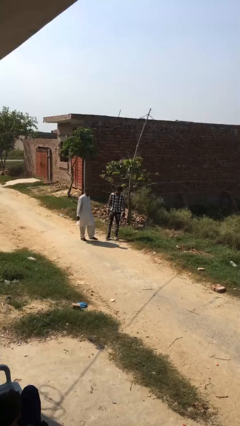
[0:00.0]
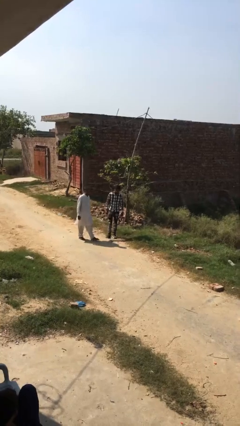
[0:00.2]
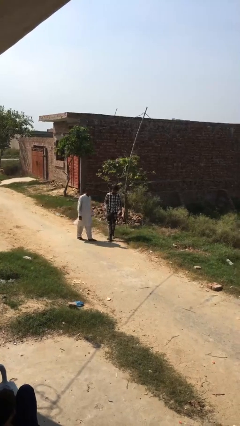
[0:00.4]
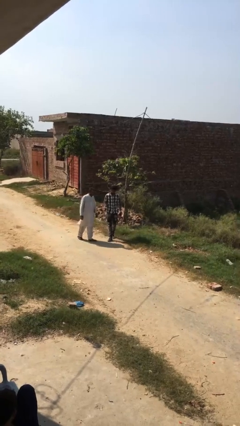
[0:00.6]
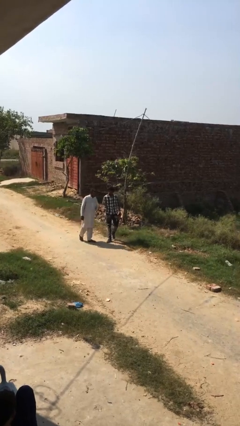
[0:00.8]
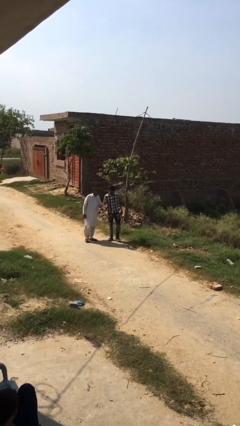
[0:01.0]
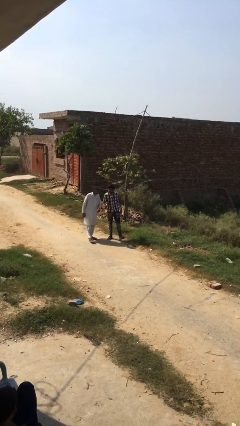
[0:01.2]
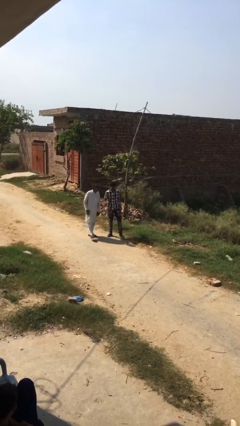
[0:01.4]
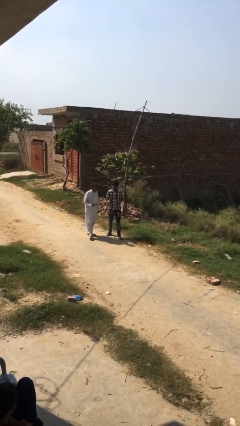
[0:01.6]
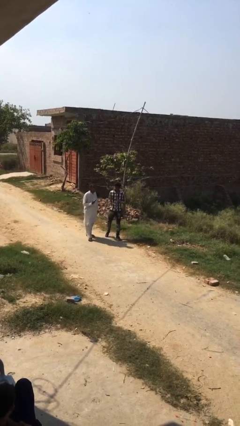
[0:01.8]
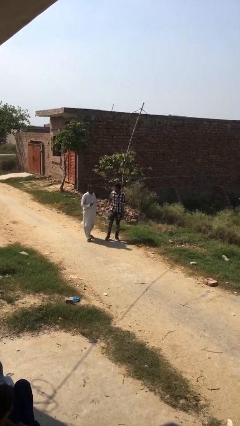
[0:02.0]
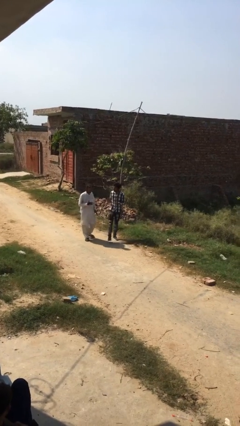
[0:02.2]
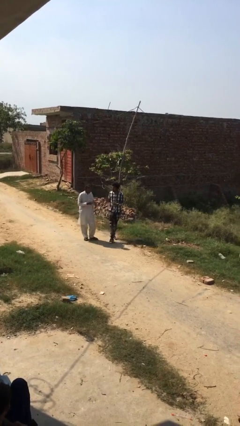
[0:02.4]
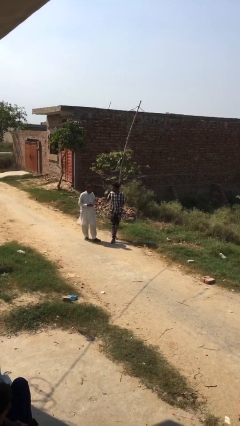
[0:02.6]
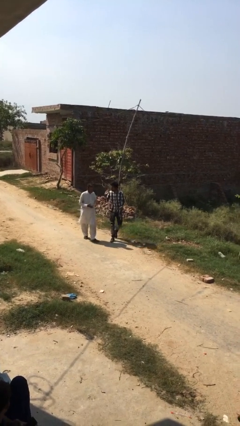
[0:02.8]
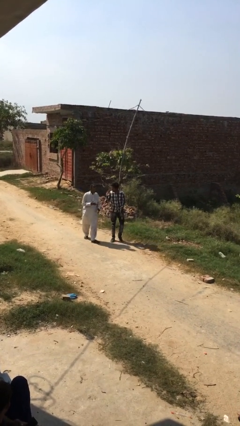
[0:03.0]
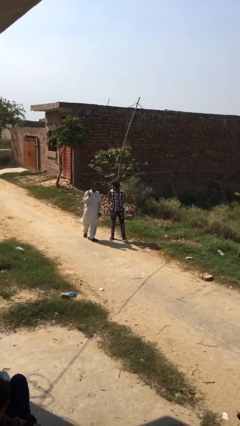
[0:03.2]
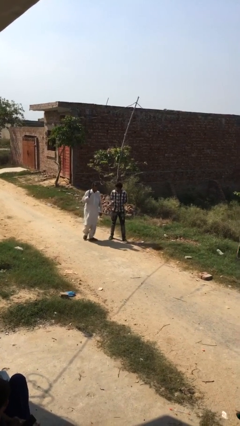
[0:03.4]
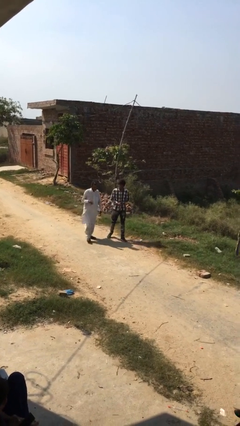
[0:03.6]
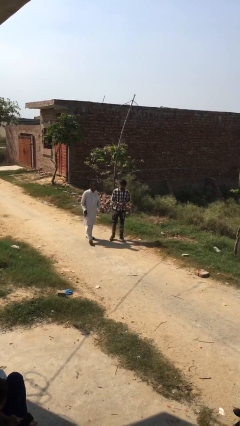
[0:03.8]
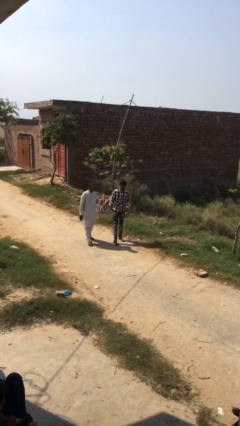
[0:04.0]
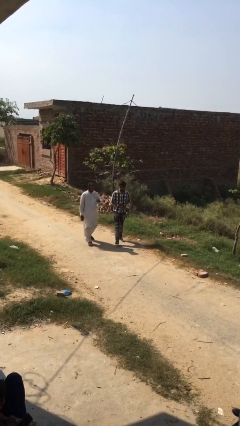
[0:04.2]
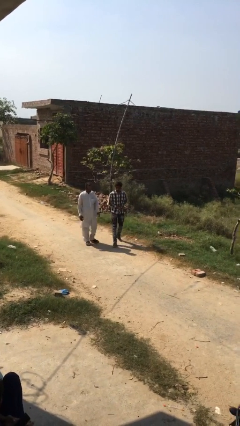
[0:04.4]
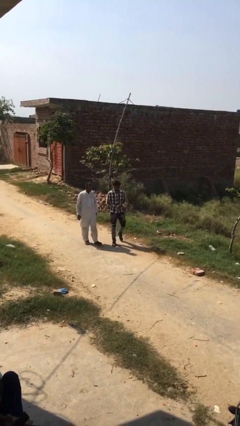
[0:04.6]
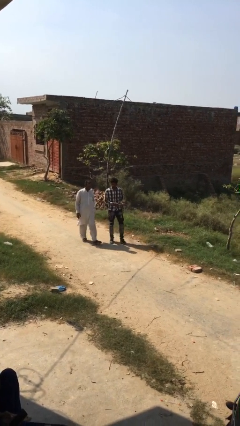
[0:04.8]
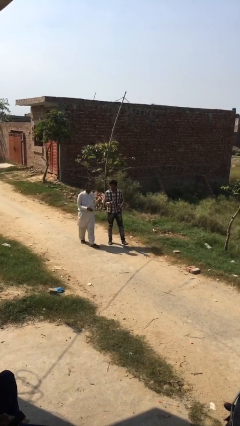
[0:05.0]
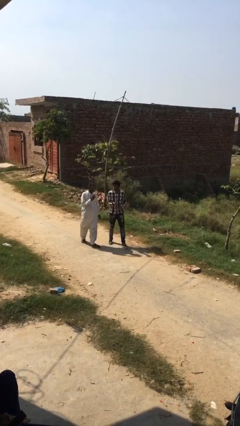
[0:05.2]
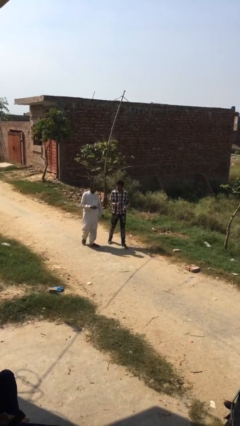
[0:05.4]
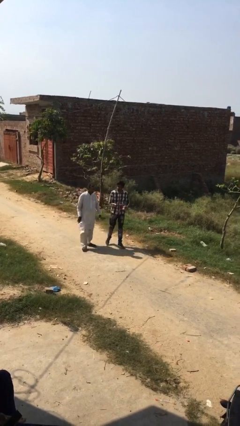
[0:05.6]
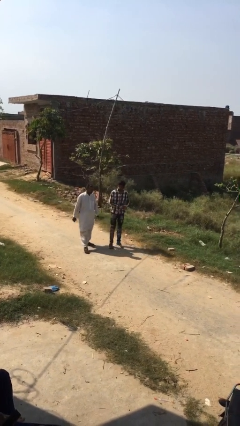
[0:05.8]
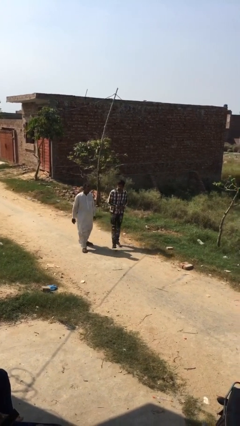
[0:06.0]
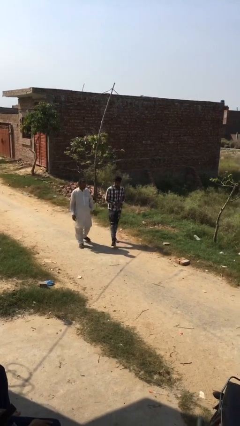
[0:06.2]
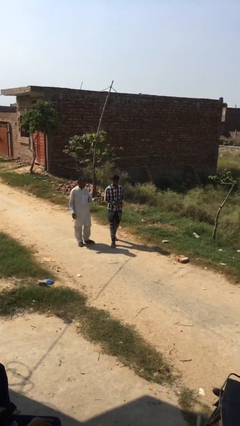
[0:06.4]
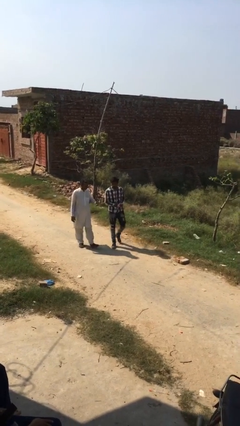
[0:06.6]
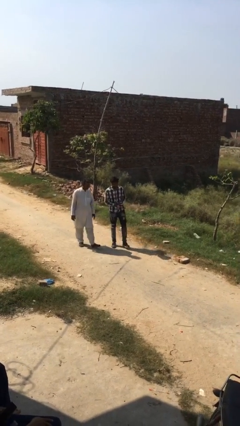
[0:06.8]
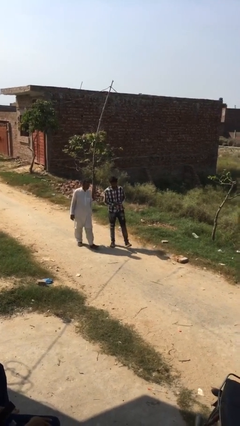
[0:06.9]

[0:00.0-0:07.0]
person talks to person

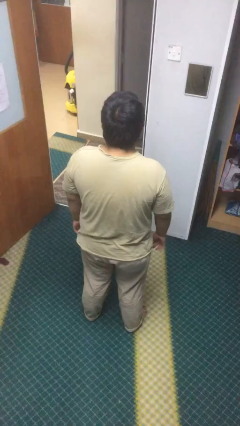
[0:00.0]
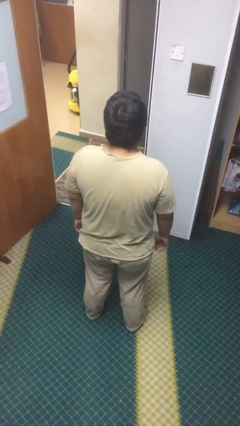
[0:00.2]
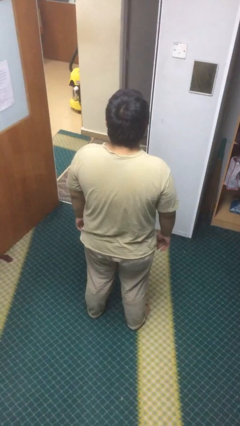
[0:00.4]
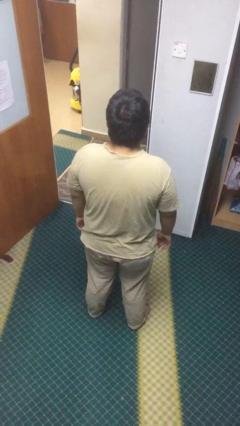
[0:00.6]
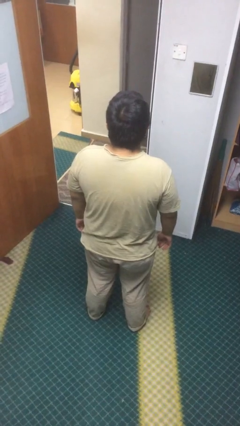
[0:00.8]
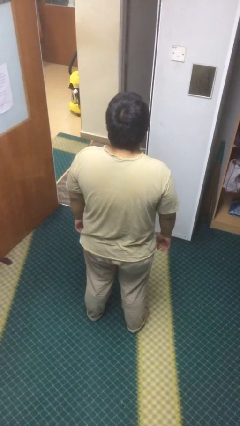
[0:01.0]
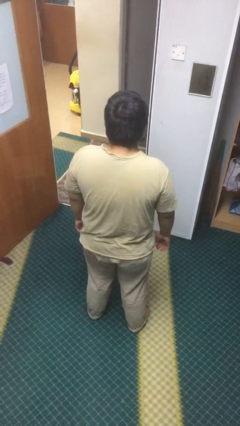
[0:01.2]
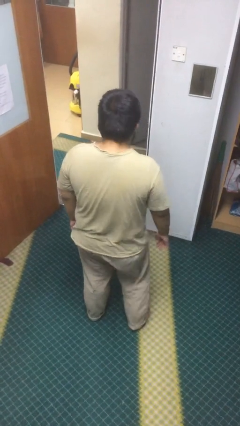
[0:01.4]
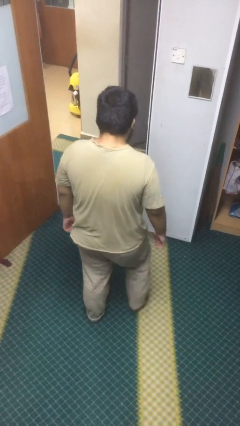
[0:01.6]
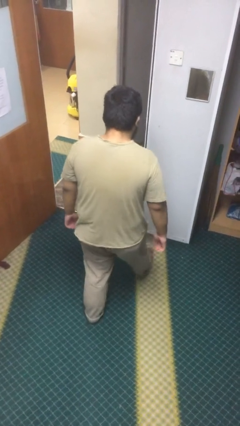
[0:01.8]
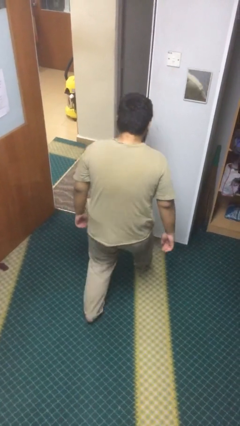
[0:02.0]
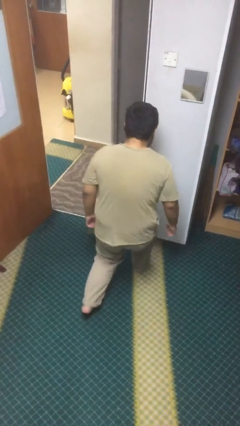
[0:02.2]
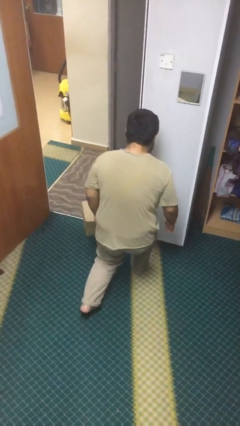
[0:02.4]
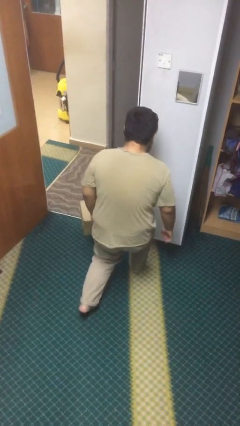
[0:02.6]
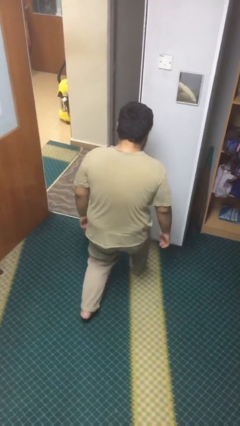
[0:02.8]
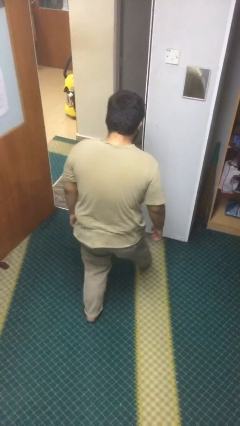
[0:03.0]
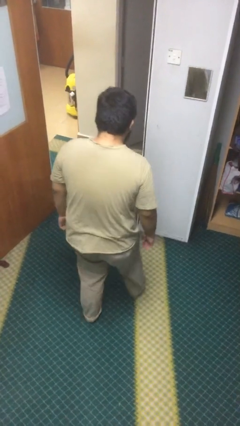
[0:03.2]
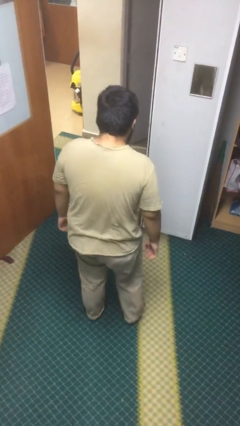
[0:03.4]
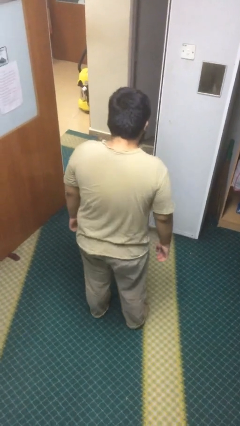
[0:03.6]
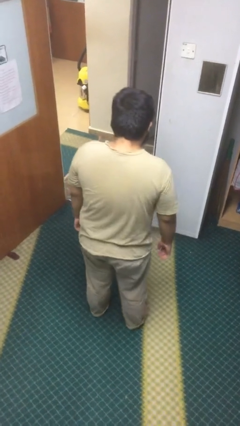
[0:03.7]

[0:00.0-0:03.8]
person exercises with lunges

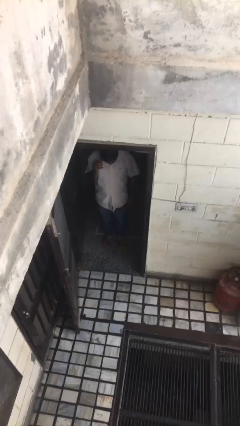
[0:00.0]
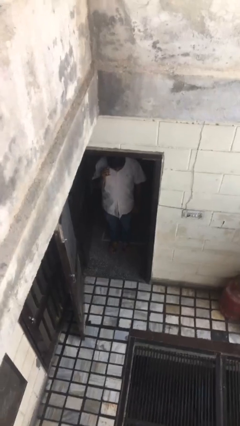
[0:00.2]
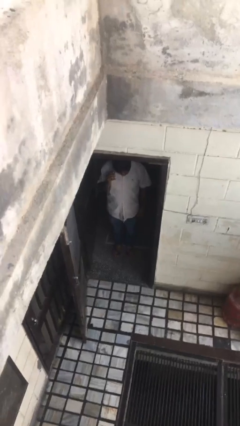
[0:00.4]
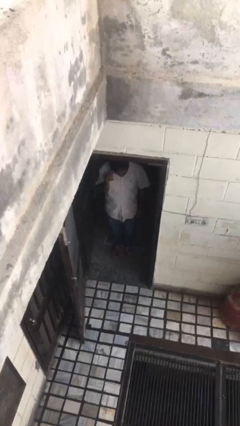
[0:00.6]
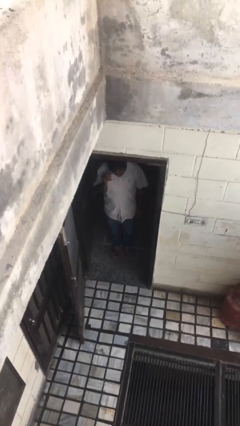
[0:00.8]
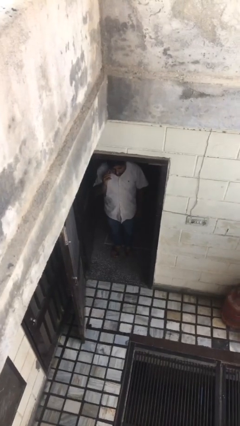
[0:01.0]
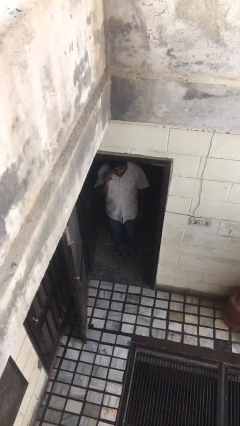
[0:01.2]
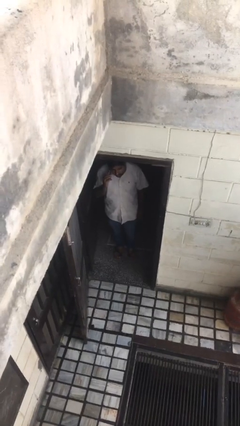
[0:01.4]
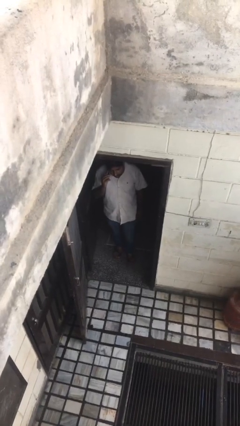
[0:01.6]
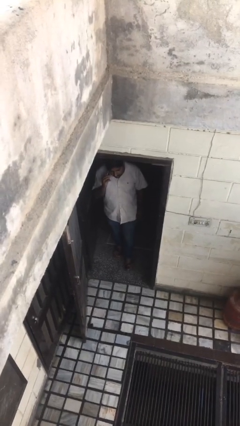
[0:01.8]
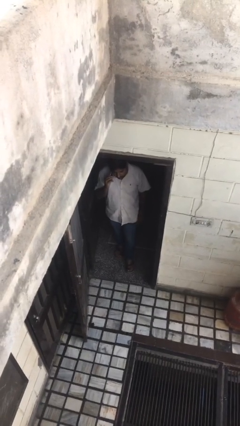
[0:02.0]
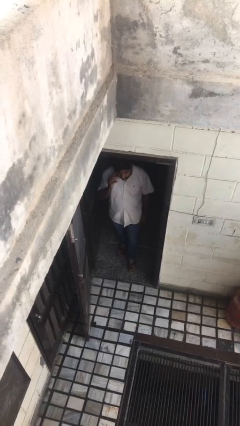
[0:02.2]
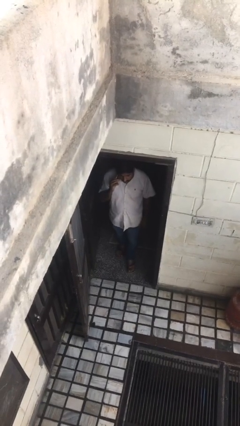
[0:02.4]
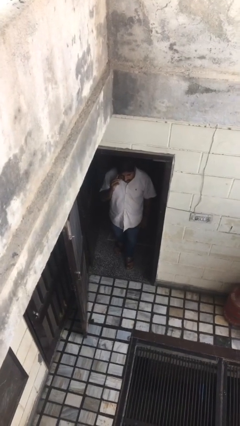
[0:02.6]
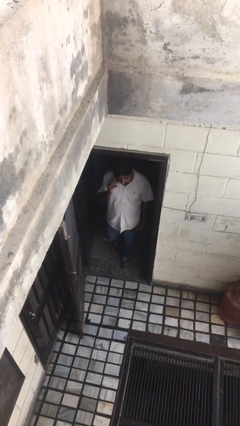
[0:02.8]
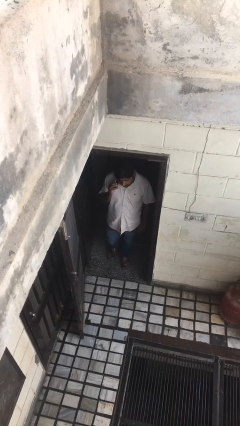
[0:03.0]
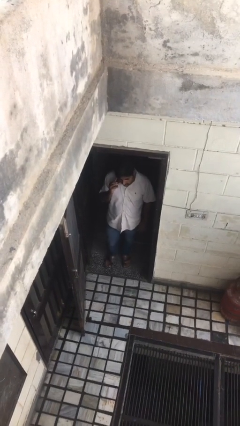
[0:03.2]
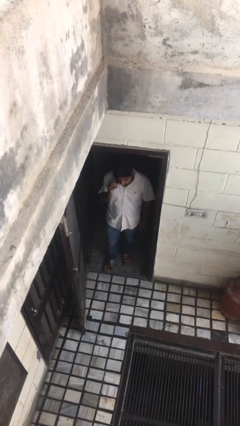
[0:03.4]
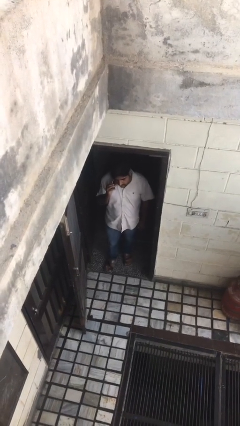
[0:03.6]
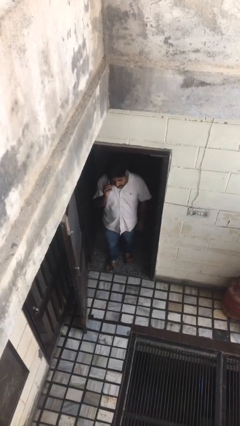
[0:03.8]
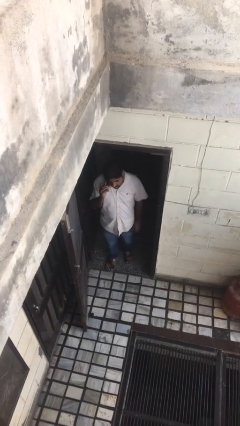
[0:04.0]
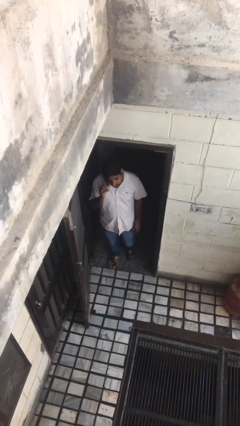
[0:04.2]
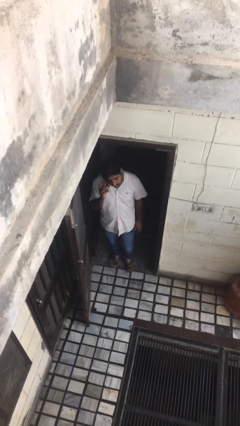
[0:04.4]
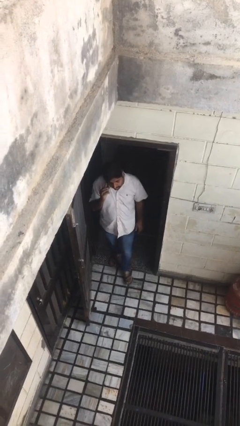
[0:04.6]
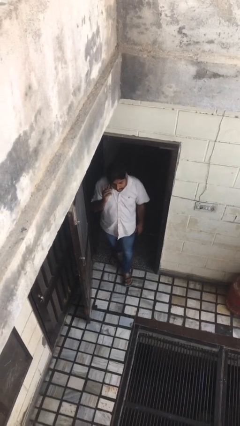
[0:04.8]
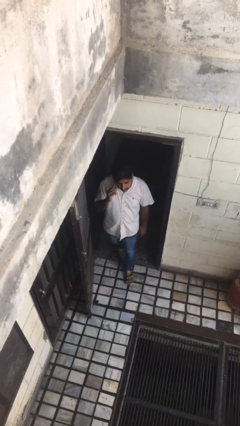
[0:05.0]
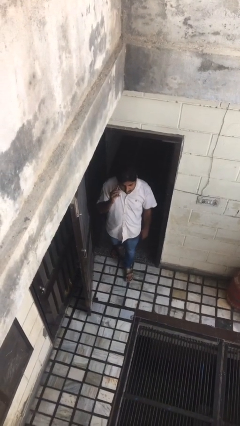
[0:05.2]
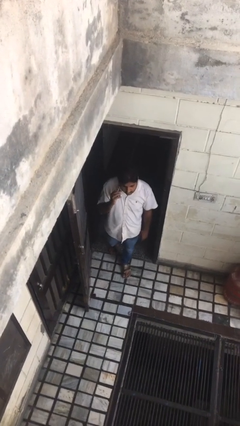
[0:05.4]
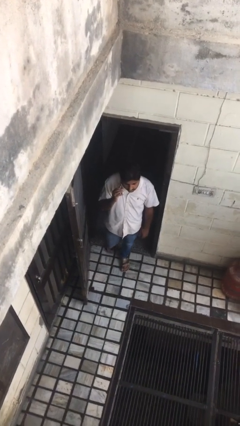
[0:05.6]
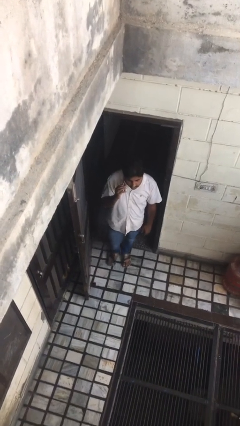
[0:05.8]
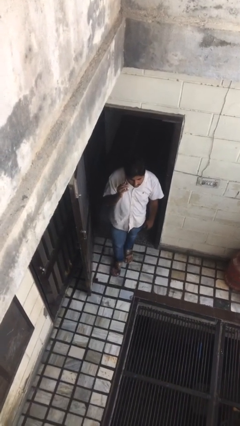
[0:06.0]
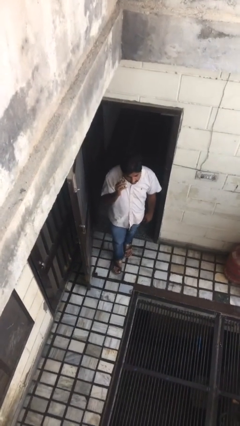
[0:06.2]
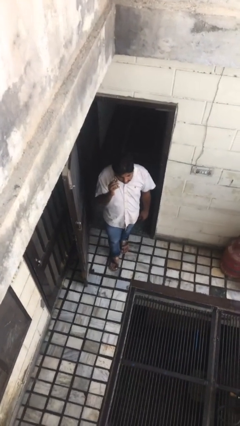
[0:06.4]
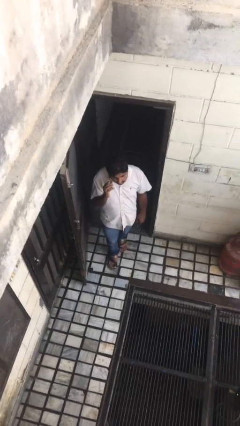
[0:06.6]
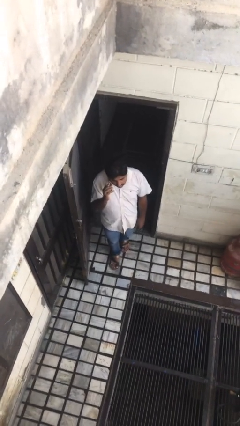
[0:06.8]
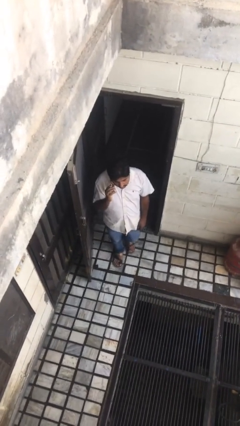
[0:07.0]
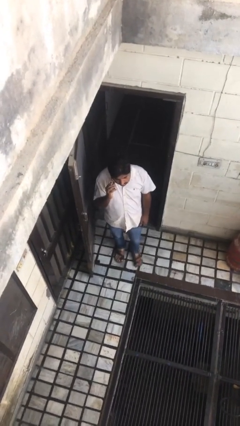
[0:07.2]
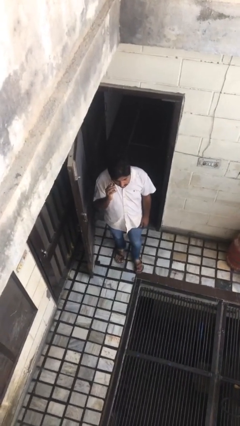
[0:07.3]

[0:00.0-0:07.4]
person enters scene through structure
